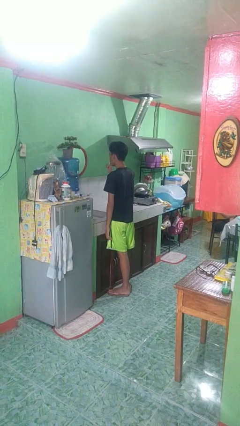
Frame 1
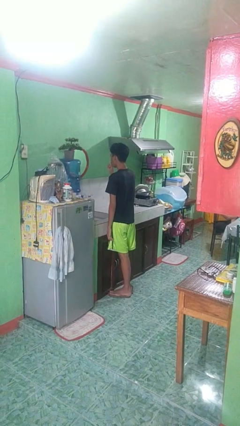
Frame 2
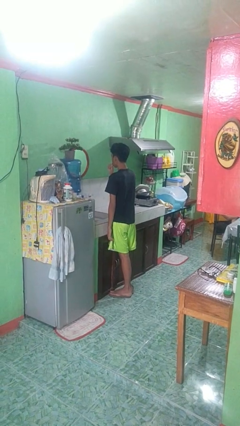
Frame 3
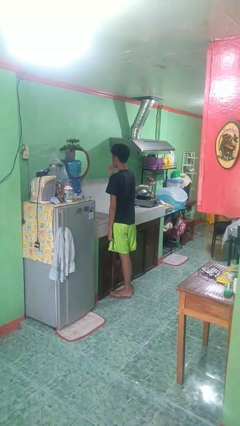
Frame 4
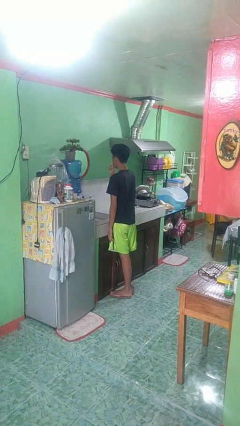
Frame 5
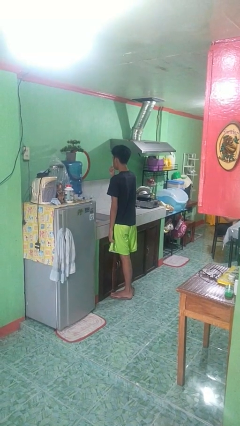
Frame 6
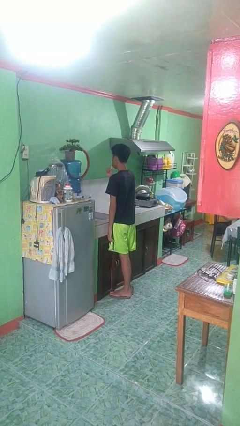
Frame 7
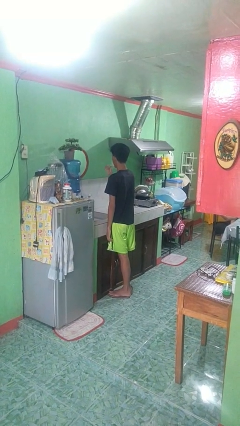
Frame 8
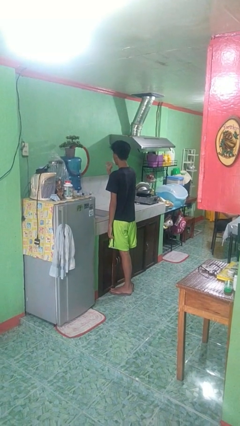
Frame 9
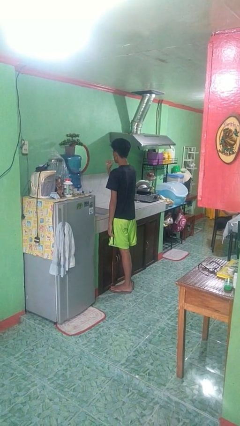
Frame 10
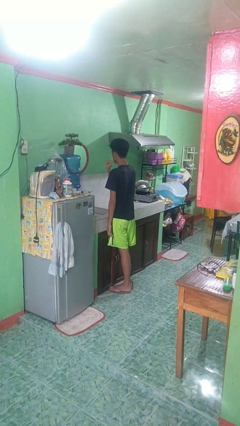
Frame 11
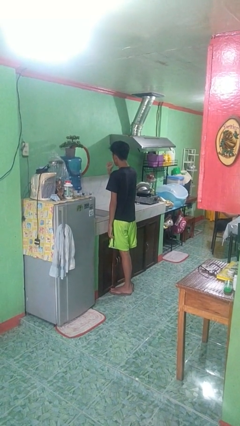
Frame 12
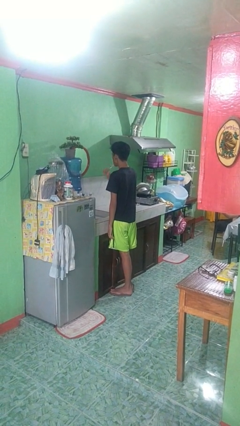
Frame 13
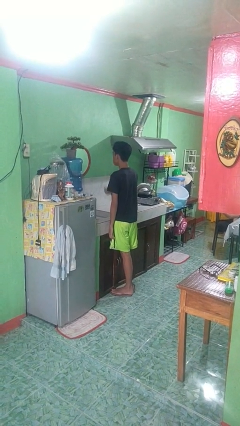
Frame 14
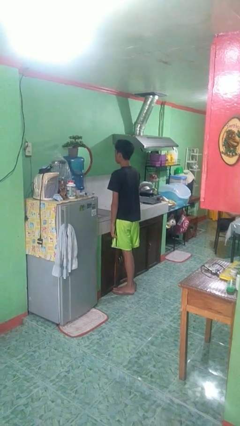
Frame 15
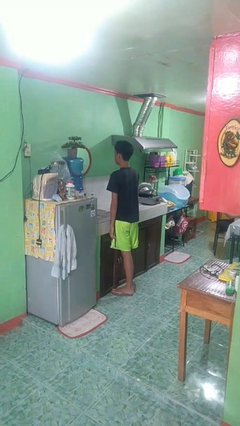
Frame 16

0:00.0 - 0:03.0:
person brushes teeth

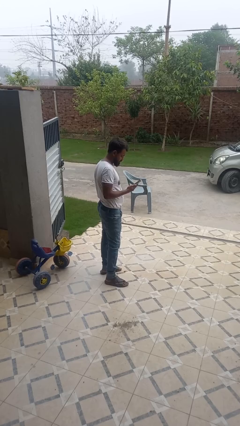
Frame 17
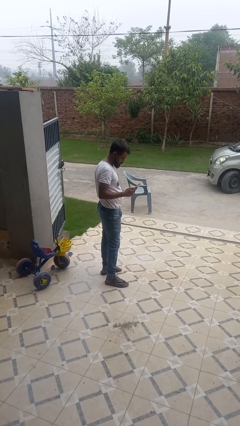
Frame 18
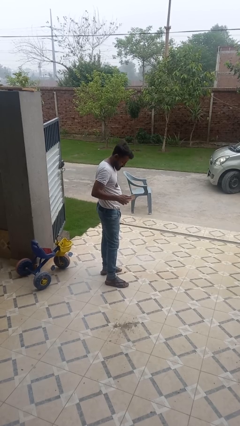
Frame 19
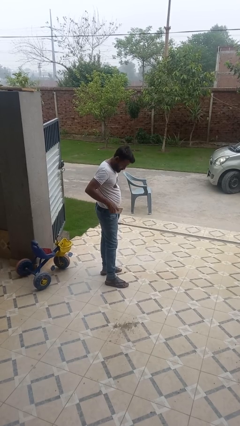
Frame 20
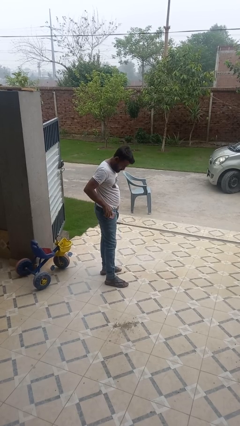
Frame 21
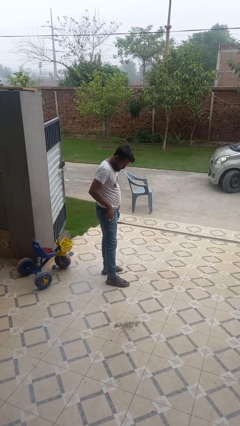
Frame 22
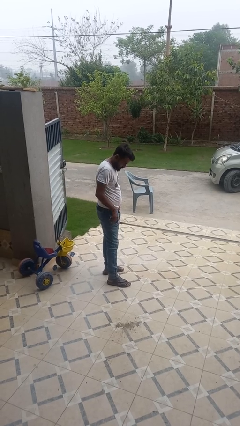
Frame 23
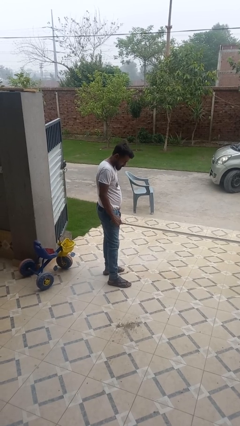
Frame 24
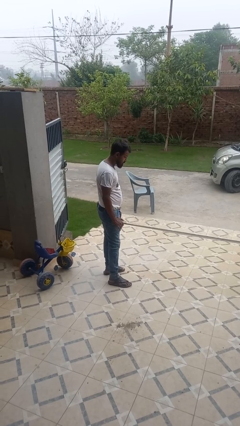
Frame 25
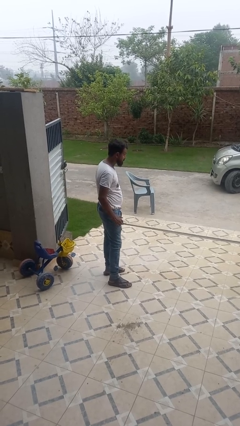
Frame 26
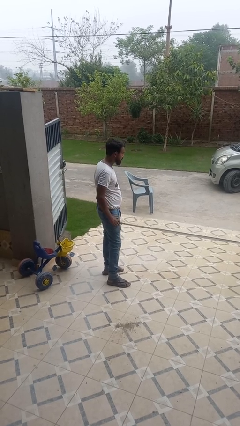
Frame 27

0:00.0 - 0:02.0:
person puts phone into pocket

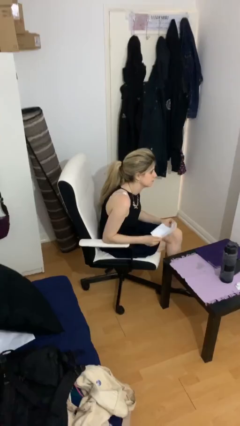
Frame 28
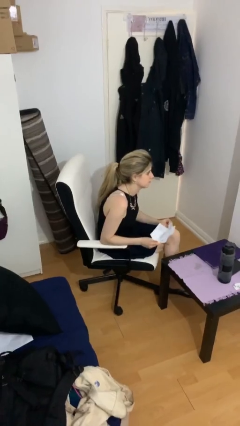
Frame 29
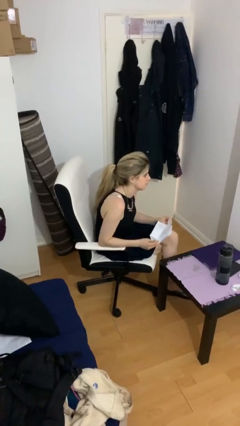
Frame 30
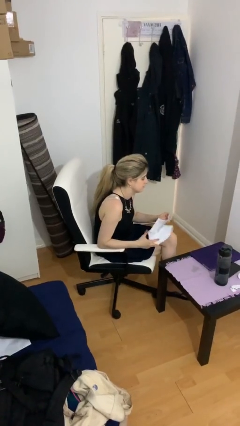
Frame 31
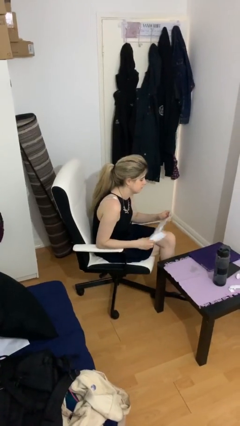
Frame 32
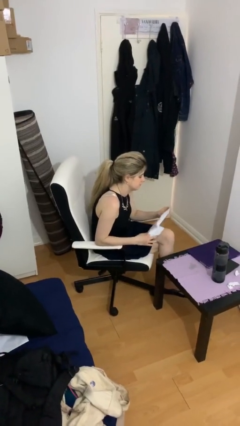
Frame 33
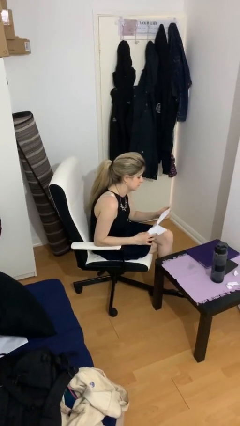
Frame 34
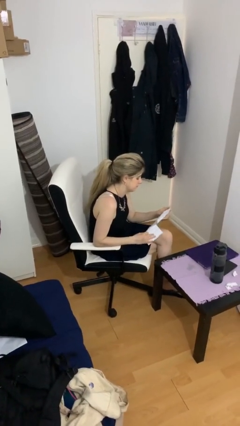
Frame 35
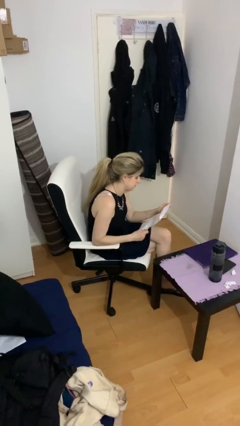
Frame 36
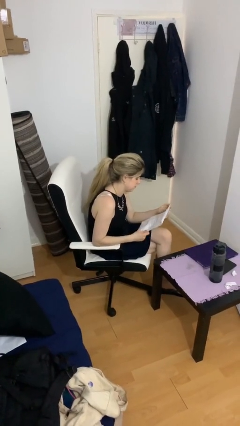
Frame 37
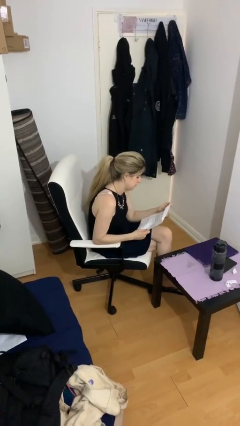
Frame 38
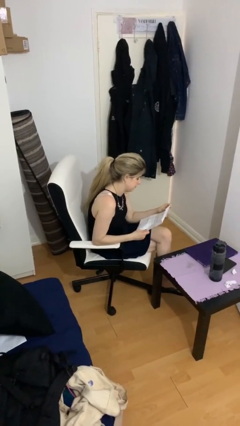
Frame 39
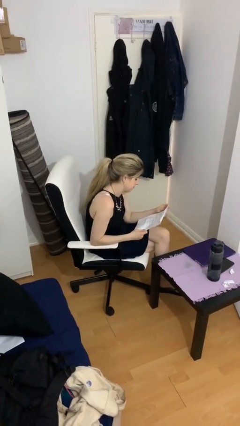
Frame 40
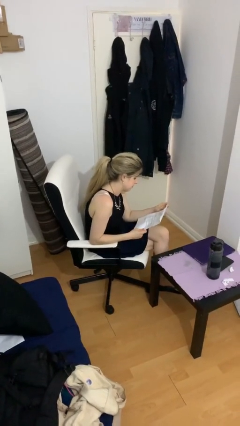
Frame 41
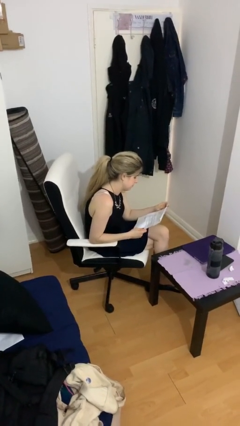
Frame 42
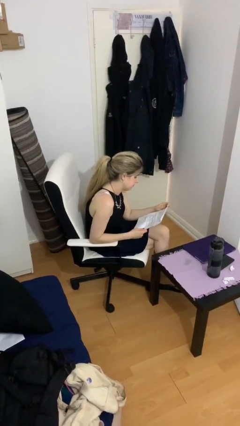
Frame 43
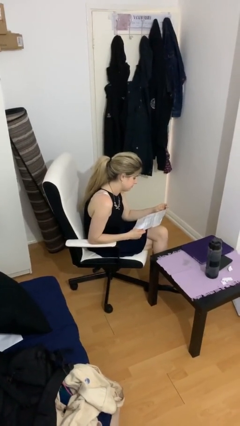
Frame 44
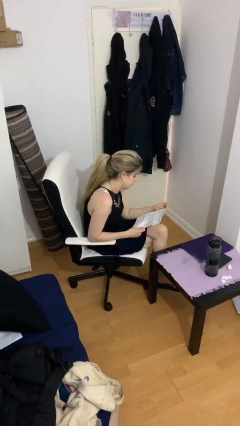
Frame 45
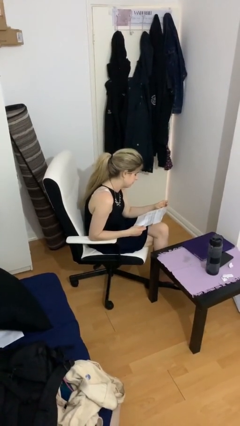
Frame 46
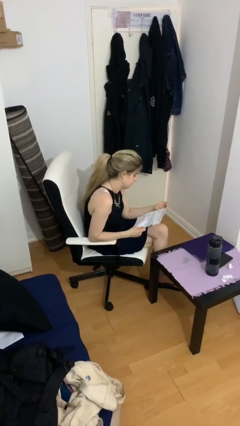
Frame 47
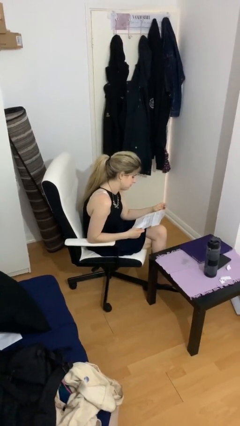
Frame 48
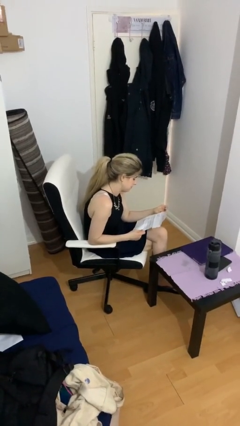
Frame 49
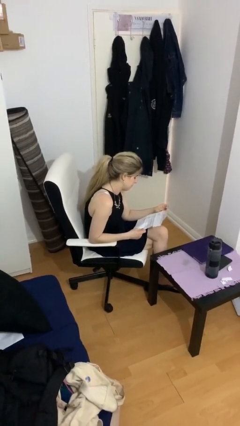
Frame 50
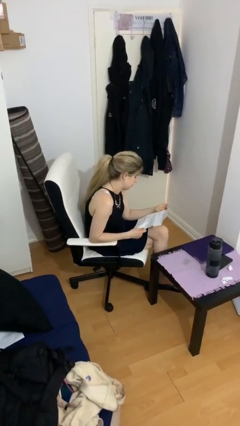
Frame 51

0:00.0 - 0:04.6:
person reads document

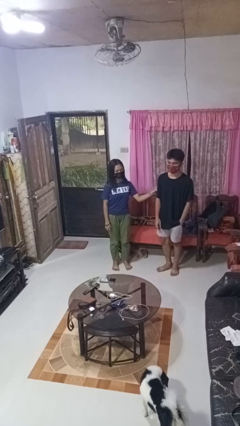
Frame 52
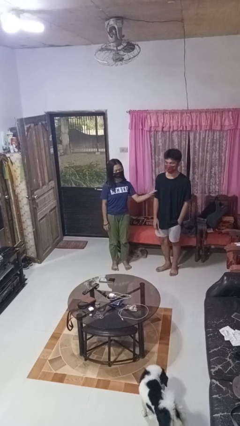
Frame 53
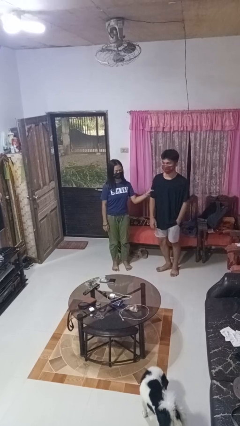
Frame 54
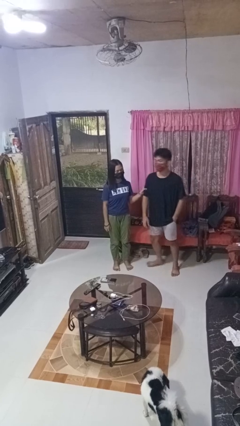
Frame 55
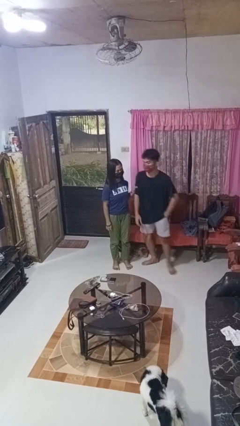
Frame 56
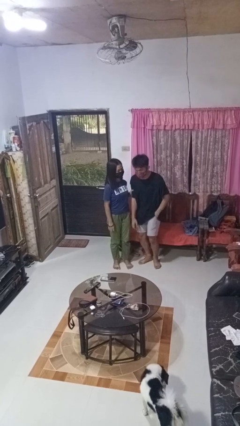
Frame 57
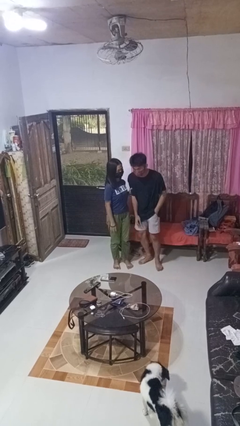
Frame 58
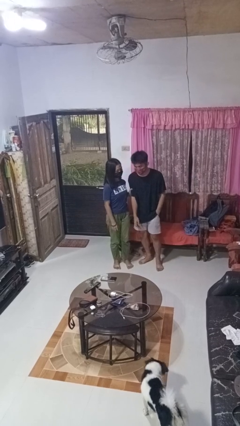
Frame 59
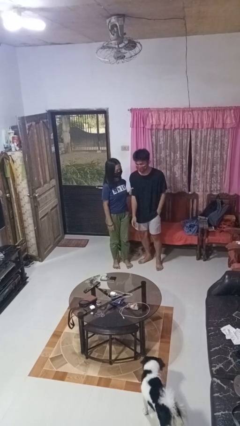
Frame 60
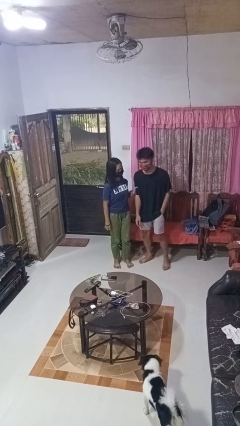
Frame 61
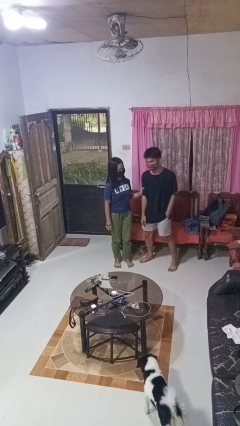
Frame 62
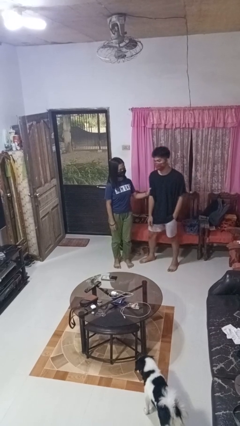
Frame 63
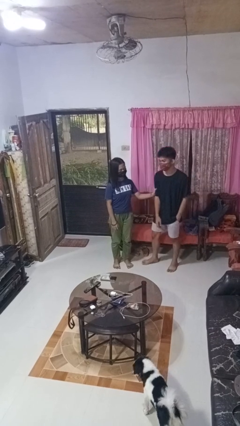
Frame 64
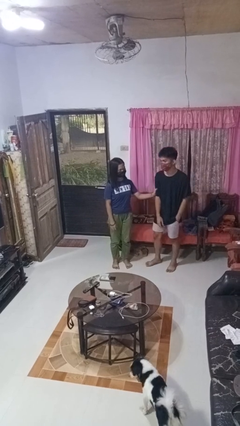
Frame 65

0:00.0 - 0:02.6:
person grabs person by bicep

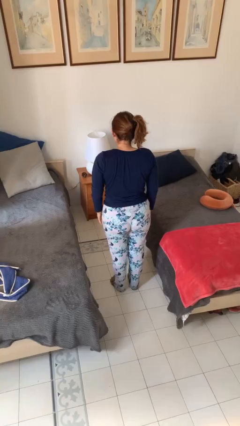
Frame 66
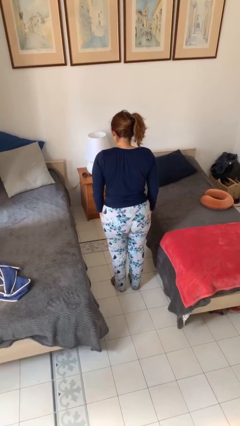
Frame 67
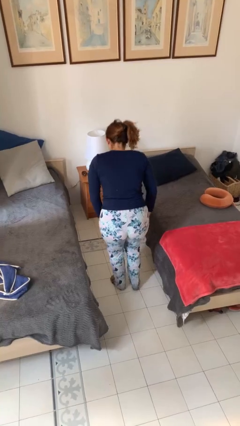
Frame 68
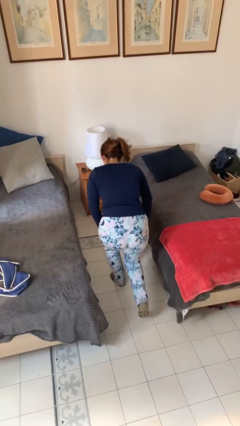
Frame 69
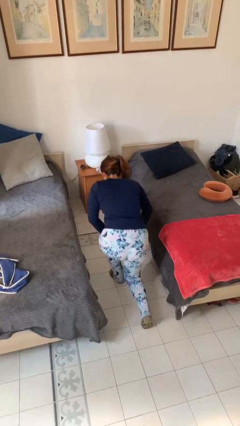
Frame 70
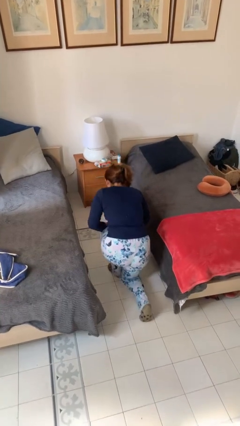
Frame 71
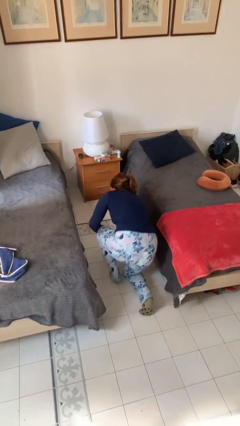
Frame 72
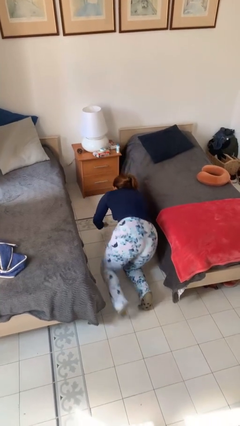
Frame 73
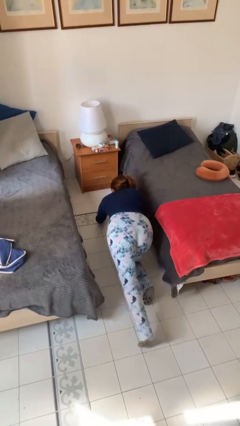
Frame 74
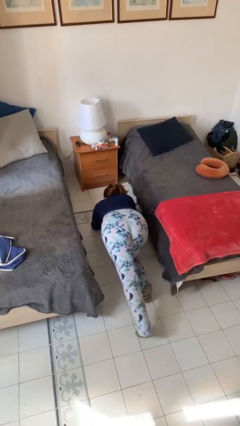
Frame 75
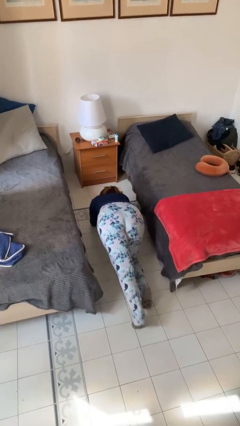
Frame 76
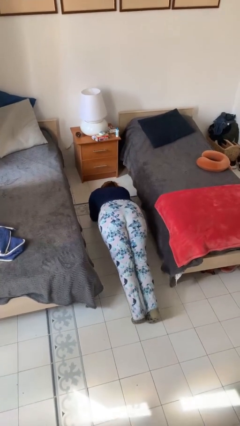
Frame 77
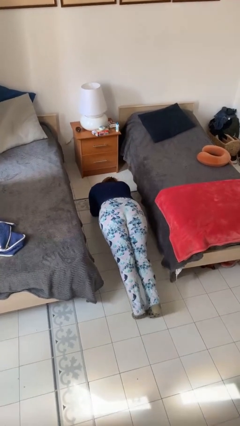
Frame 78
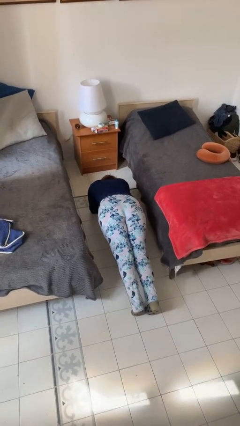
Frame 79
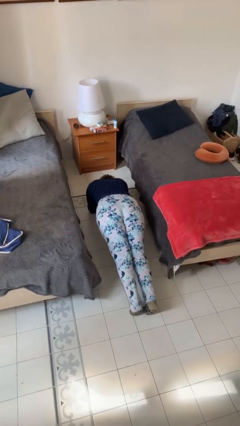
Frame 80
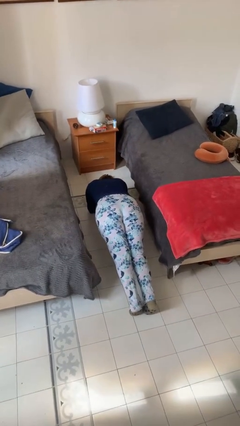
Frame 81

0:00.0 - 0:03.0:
person exercises with plank

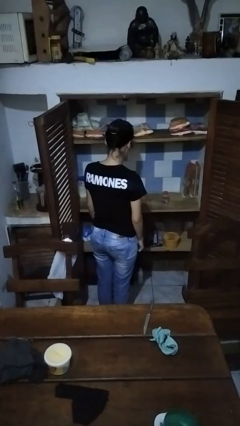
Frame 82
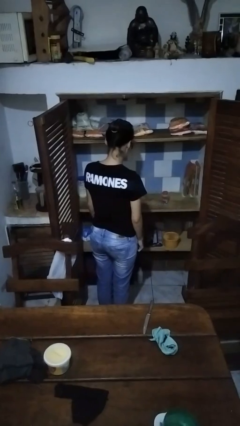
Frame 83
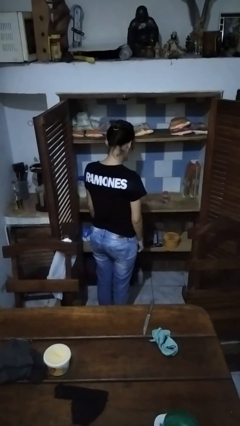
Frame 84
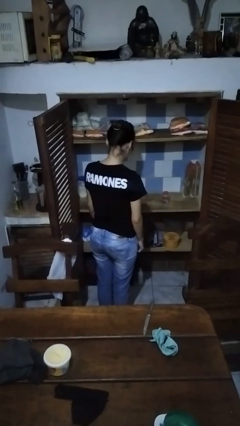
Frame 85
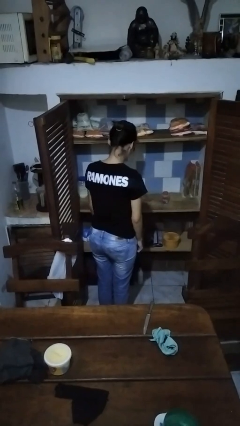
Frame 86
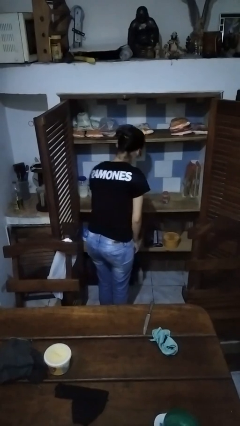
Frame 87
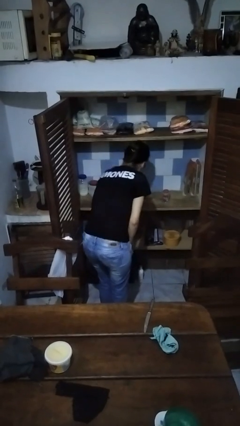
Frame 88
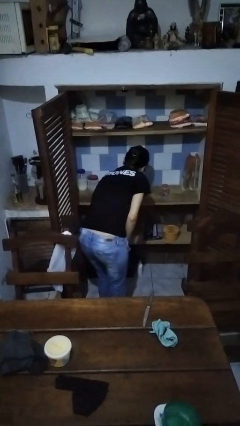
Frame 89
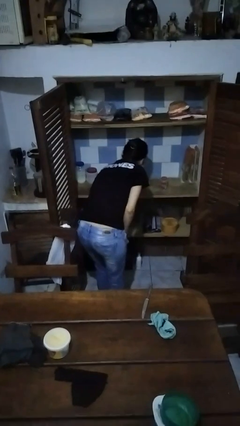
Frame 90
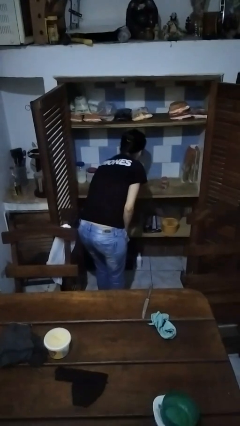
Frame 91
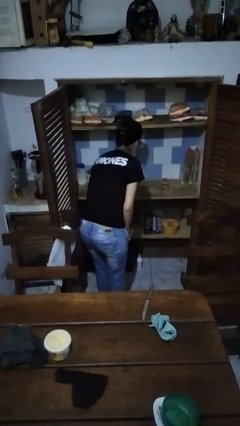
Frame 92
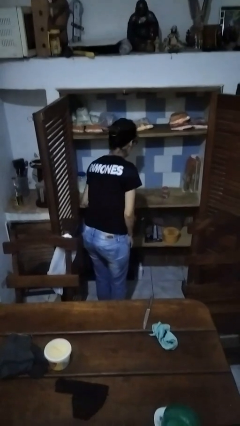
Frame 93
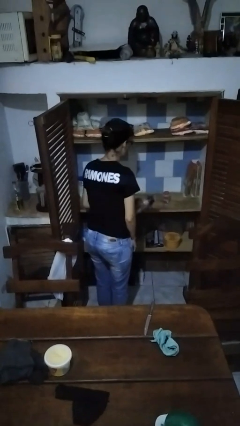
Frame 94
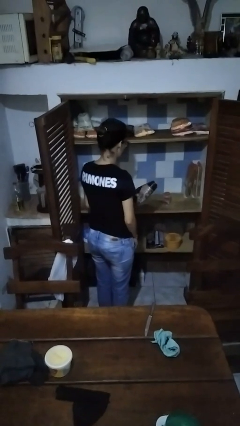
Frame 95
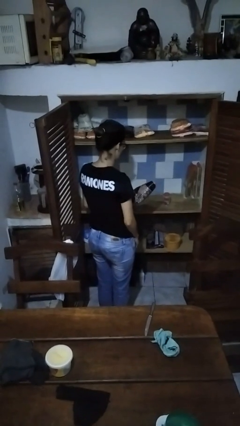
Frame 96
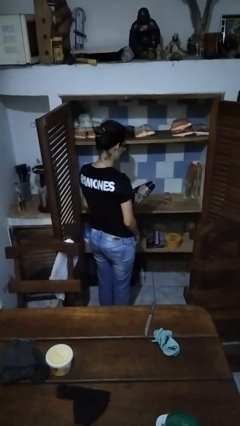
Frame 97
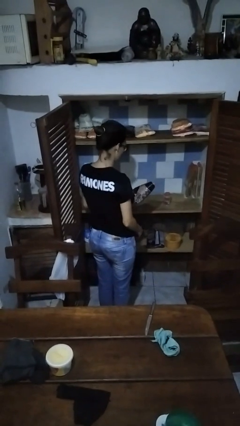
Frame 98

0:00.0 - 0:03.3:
person takes object from cabinet
